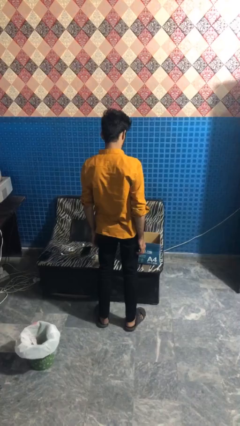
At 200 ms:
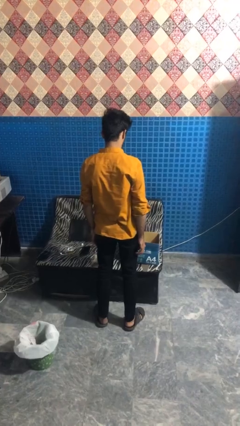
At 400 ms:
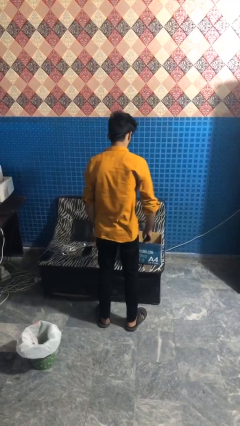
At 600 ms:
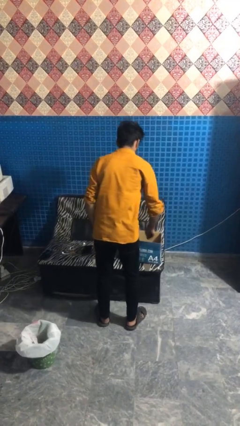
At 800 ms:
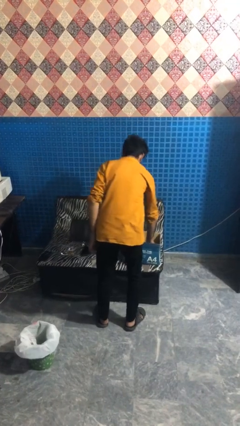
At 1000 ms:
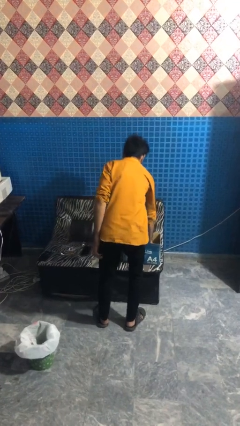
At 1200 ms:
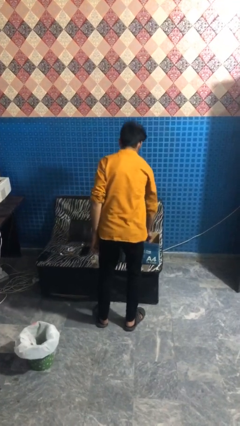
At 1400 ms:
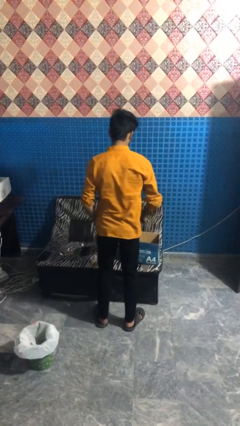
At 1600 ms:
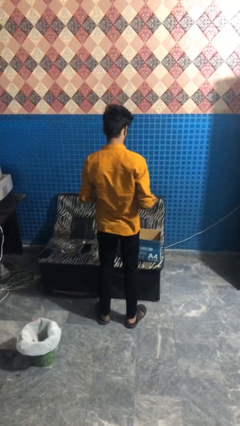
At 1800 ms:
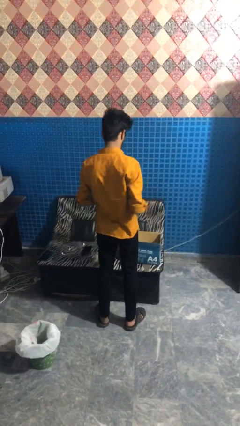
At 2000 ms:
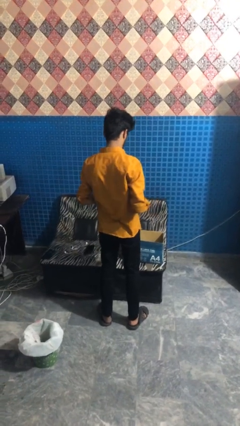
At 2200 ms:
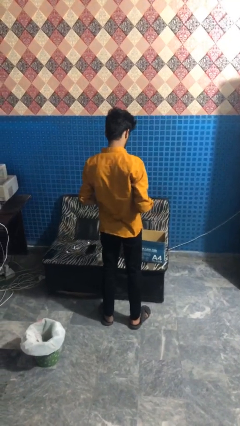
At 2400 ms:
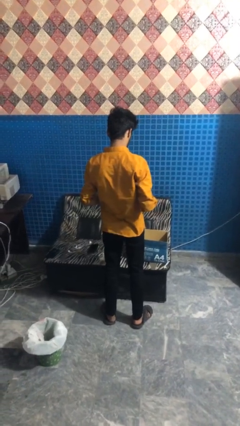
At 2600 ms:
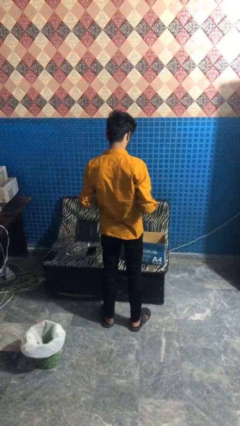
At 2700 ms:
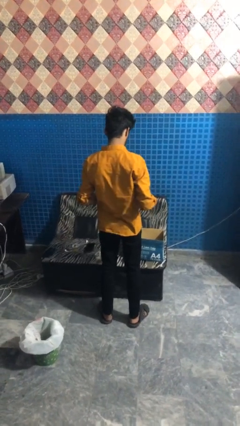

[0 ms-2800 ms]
person takes object from box

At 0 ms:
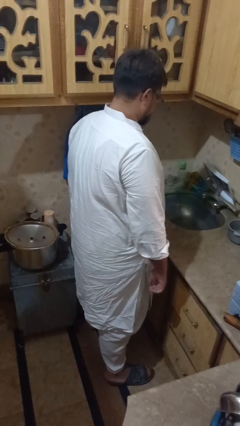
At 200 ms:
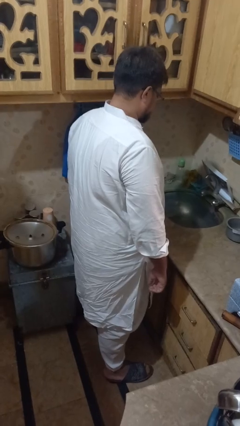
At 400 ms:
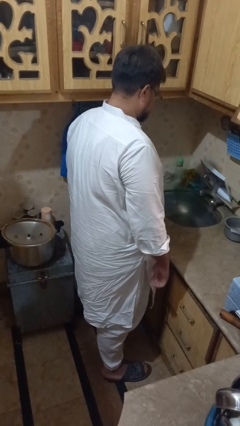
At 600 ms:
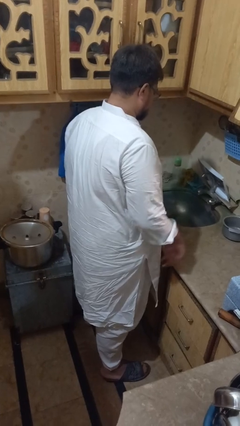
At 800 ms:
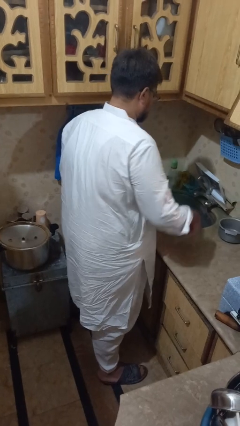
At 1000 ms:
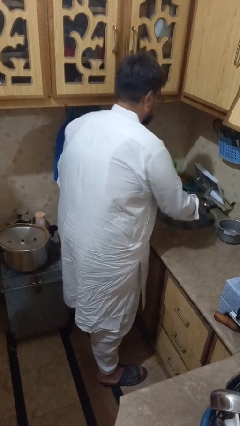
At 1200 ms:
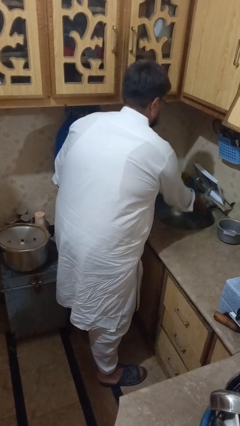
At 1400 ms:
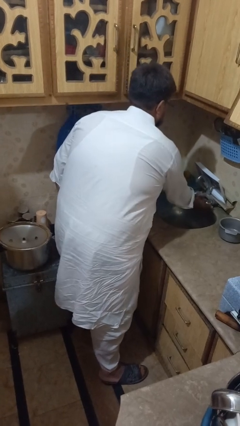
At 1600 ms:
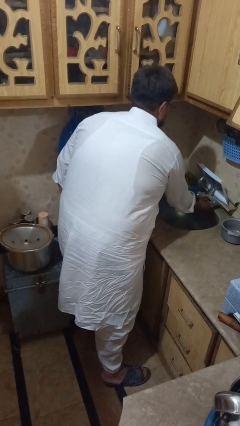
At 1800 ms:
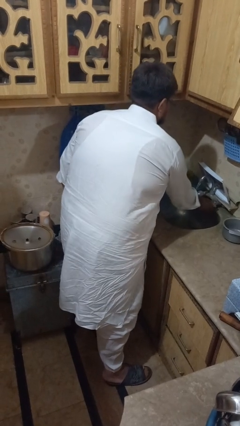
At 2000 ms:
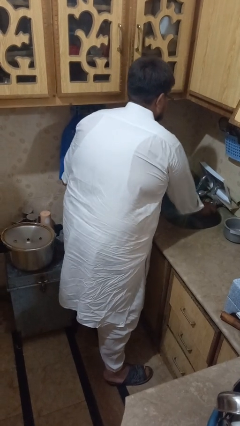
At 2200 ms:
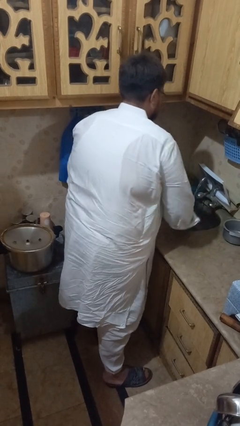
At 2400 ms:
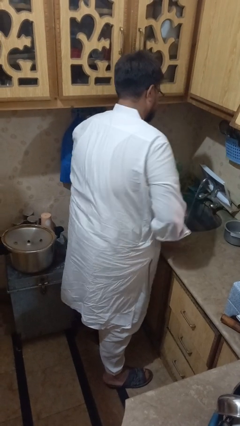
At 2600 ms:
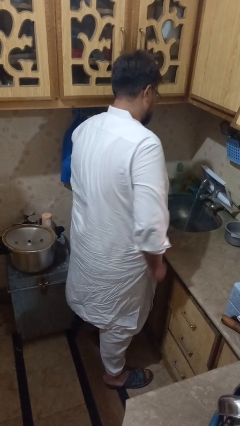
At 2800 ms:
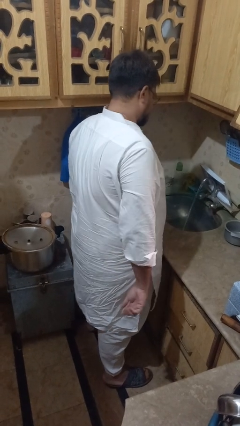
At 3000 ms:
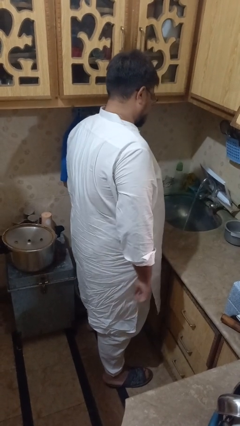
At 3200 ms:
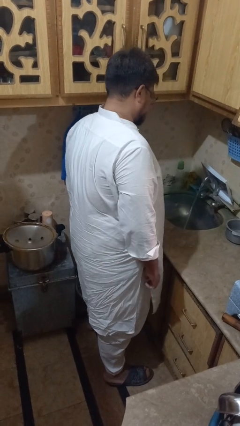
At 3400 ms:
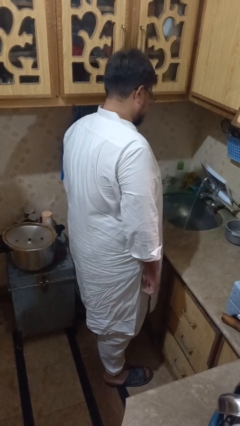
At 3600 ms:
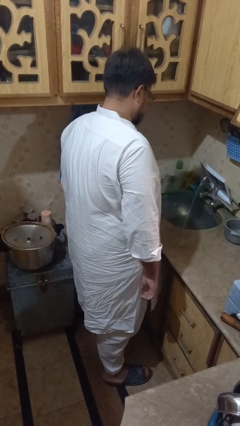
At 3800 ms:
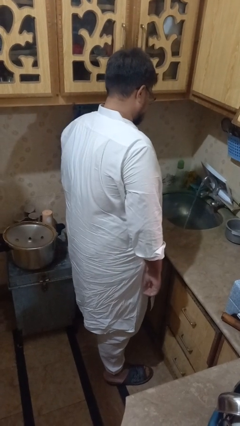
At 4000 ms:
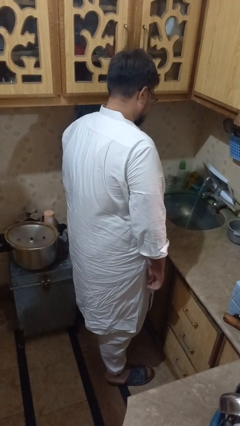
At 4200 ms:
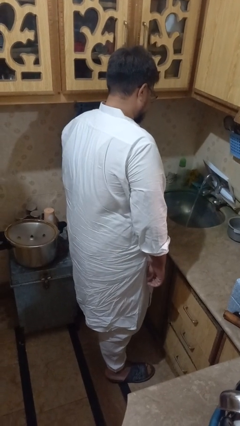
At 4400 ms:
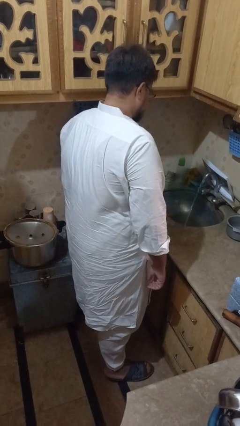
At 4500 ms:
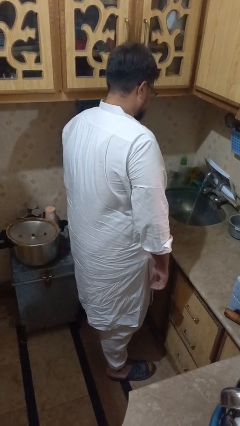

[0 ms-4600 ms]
person turns on faucet

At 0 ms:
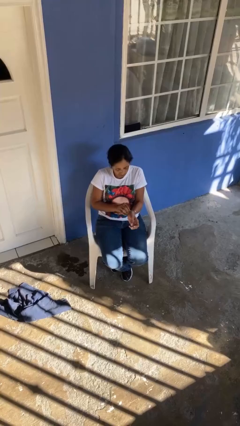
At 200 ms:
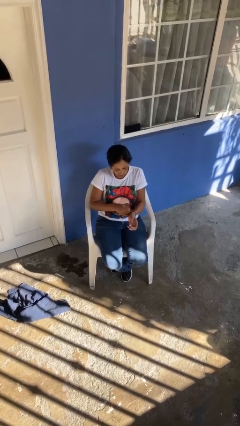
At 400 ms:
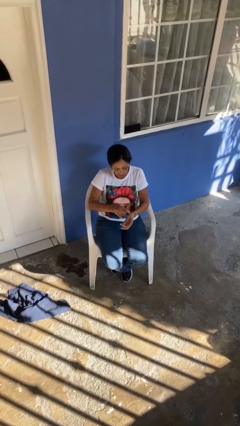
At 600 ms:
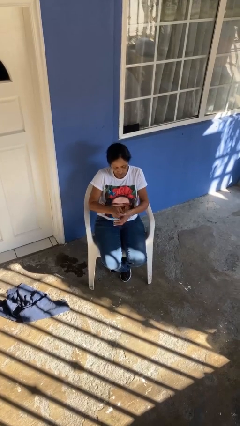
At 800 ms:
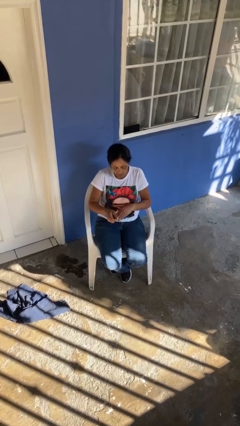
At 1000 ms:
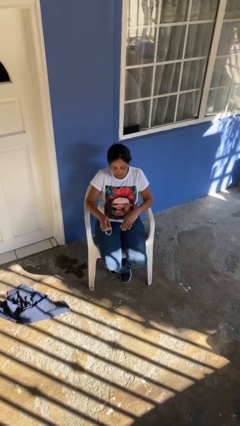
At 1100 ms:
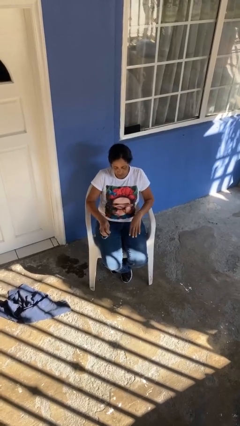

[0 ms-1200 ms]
person takes off wristwatch

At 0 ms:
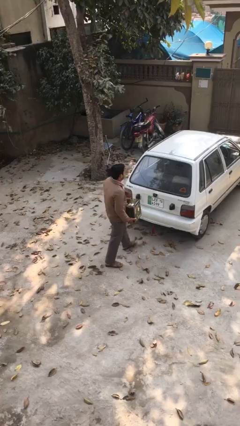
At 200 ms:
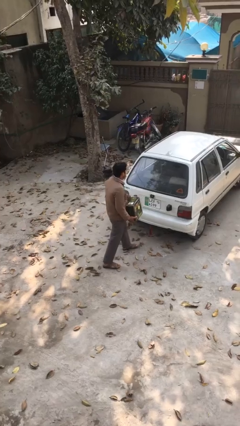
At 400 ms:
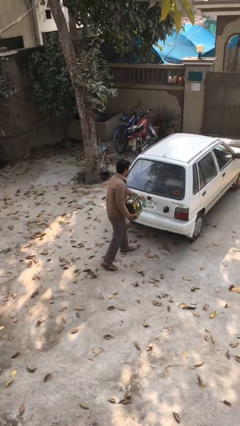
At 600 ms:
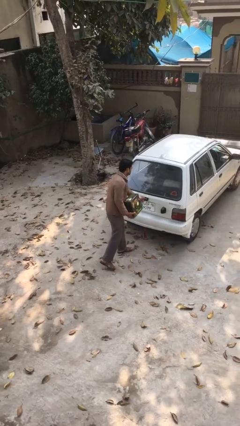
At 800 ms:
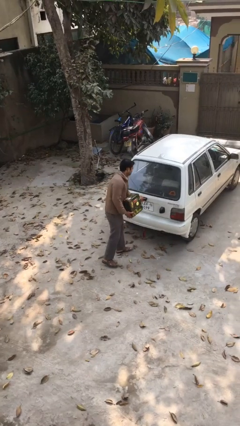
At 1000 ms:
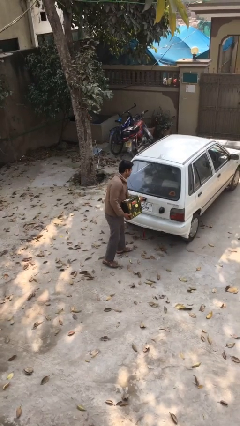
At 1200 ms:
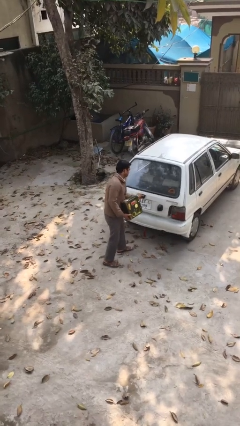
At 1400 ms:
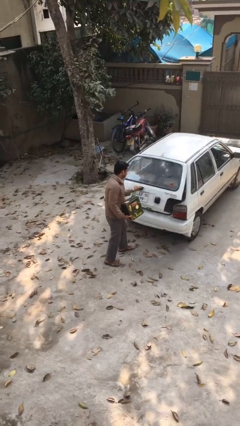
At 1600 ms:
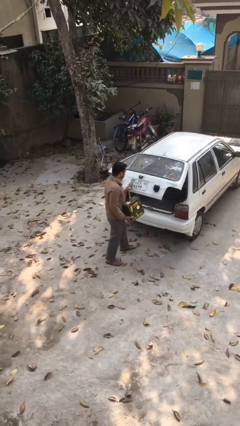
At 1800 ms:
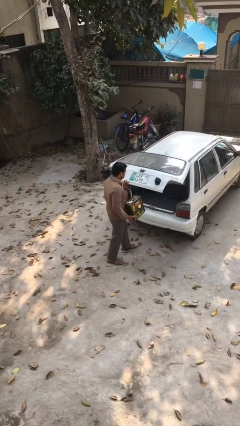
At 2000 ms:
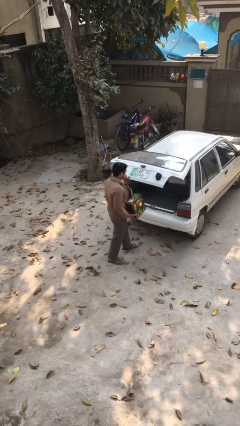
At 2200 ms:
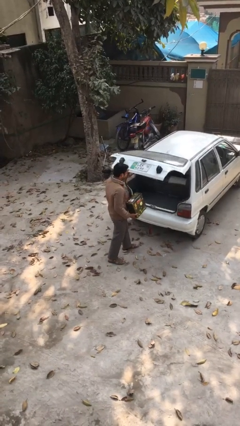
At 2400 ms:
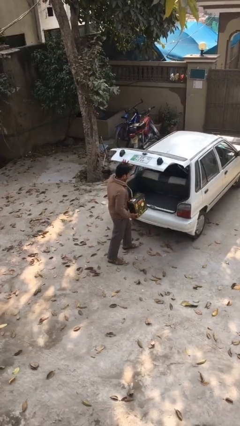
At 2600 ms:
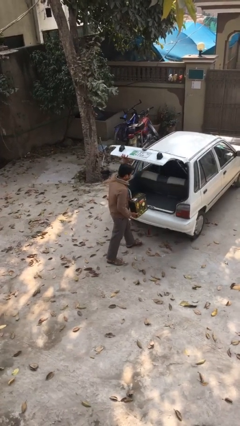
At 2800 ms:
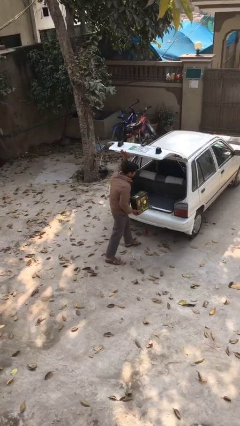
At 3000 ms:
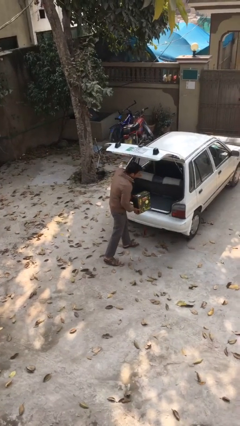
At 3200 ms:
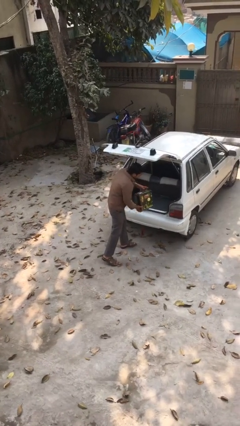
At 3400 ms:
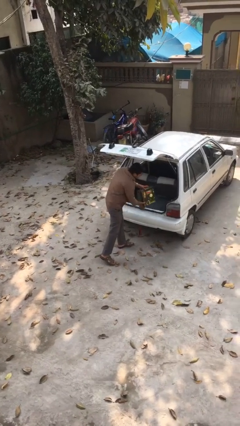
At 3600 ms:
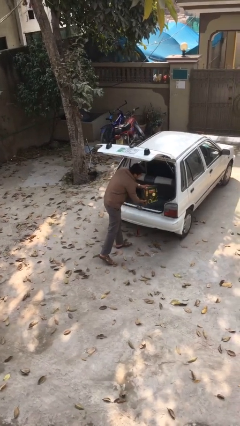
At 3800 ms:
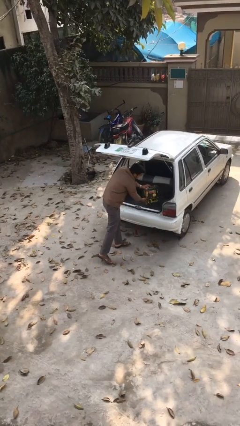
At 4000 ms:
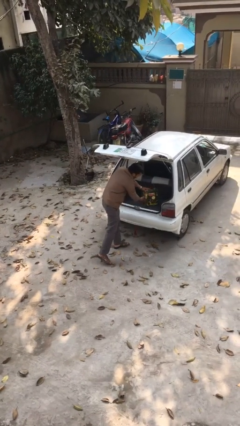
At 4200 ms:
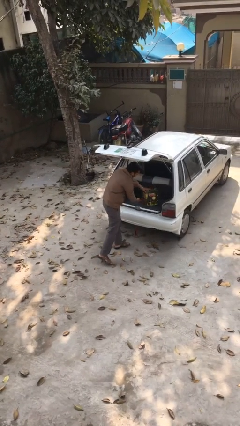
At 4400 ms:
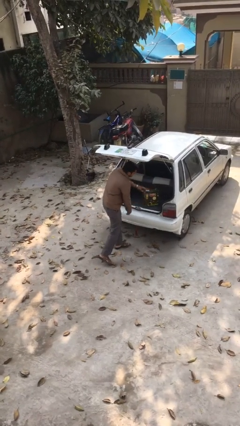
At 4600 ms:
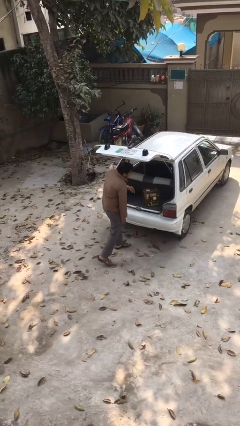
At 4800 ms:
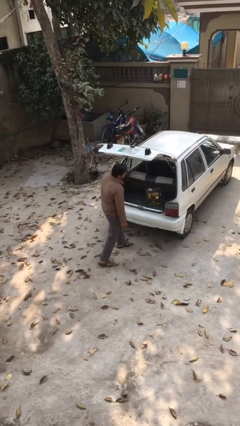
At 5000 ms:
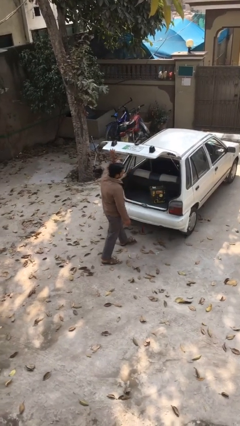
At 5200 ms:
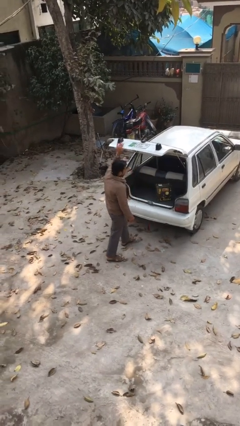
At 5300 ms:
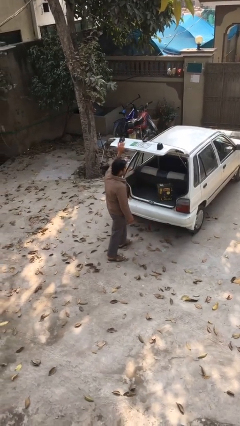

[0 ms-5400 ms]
person loads car

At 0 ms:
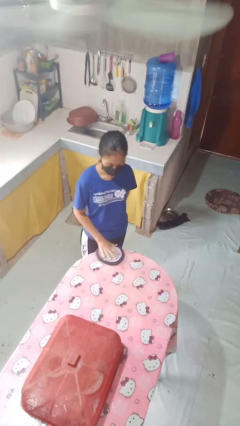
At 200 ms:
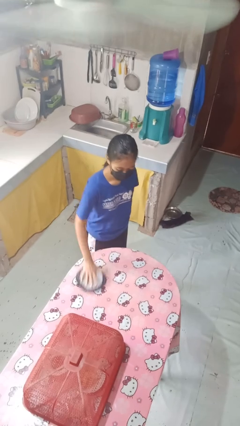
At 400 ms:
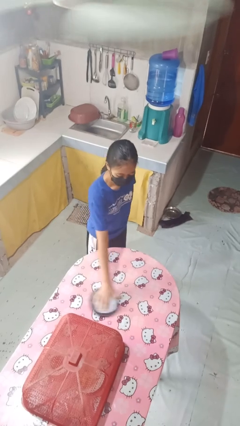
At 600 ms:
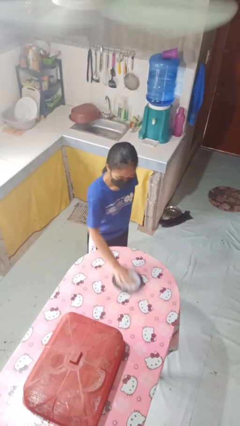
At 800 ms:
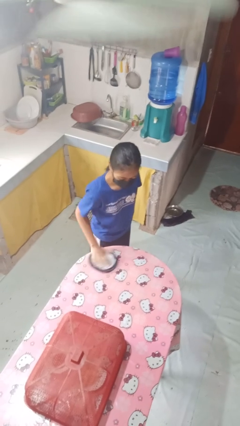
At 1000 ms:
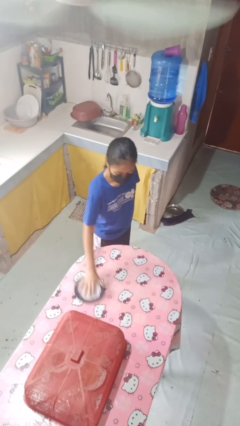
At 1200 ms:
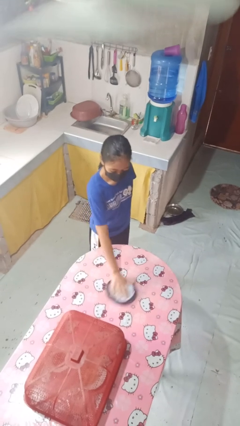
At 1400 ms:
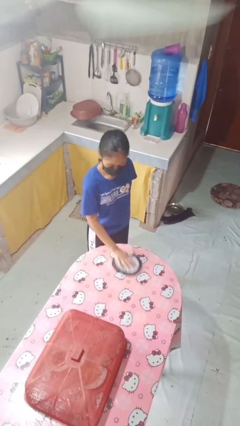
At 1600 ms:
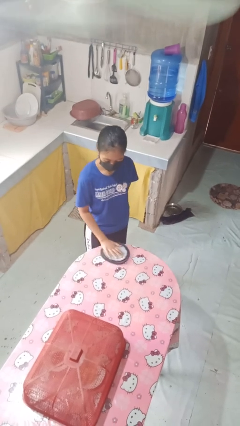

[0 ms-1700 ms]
person cleans table with rag

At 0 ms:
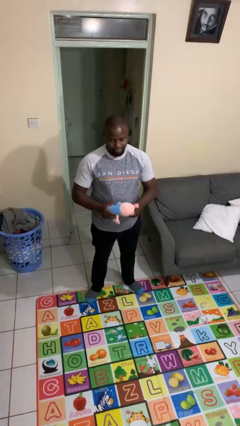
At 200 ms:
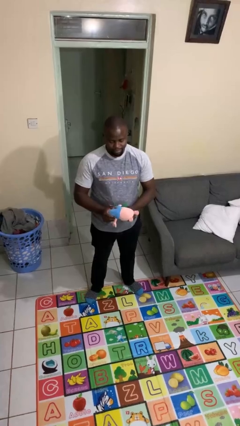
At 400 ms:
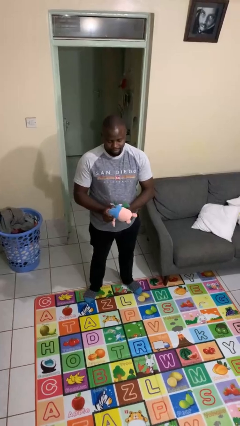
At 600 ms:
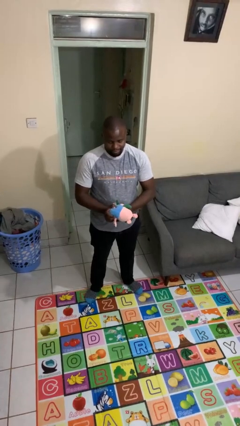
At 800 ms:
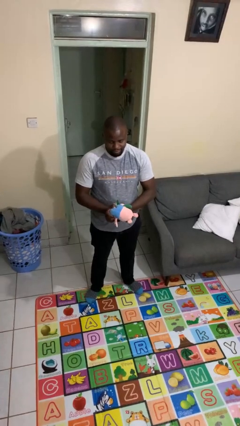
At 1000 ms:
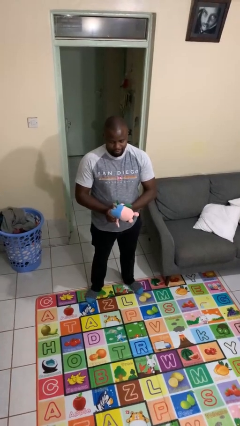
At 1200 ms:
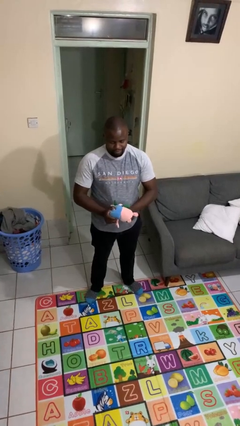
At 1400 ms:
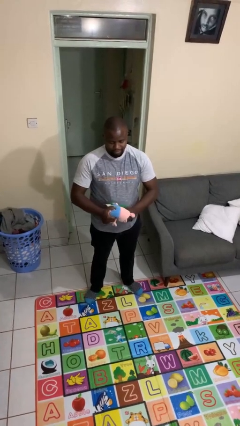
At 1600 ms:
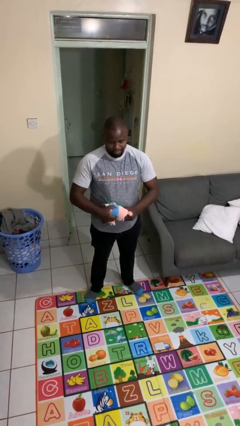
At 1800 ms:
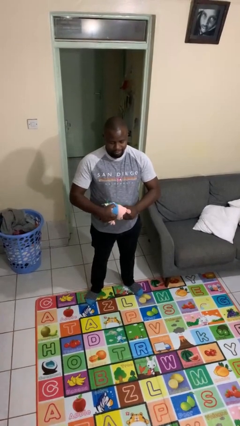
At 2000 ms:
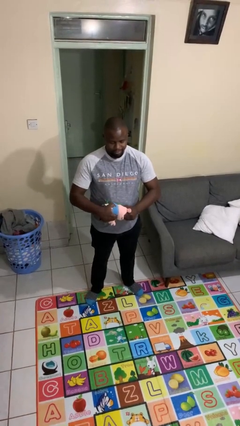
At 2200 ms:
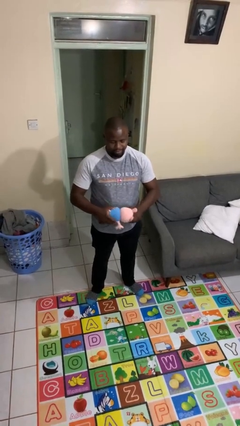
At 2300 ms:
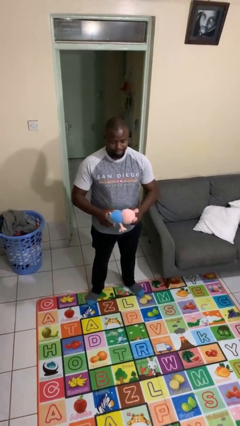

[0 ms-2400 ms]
person squeezes object
